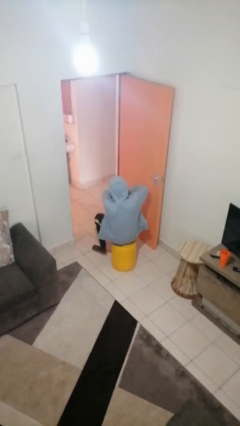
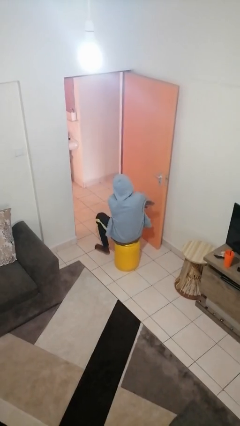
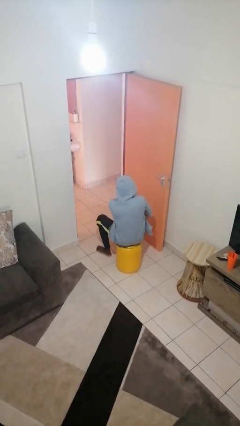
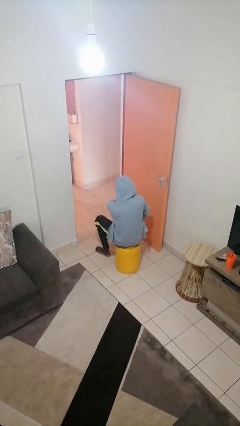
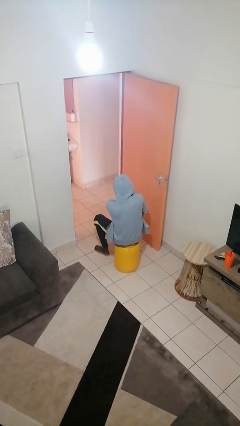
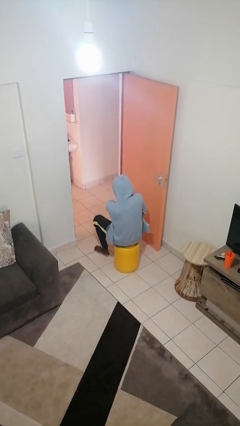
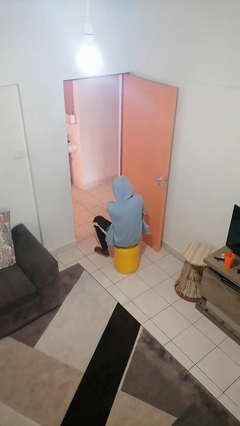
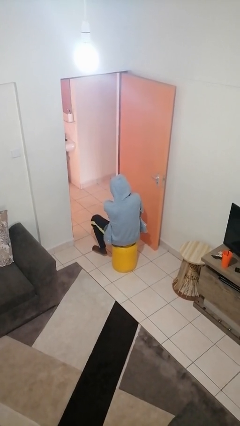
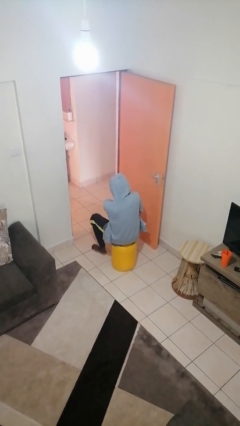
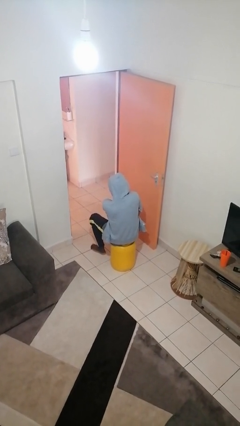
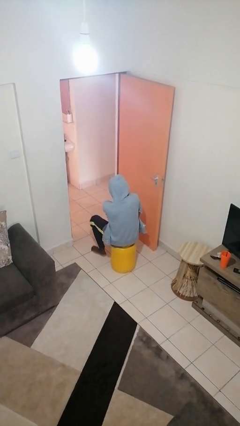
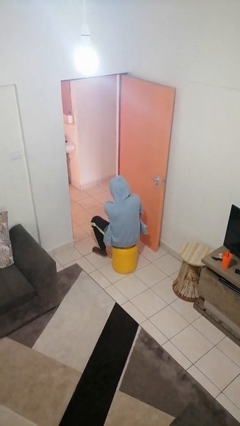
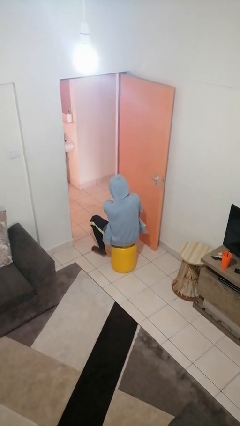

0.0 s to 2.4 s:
person crosses arms

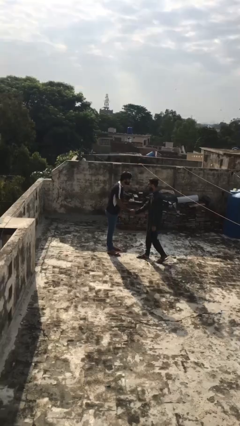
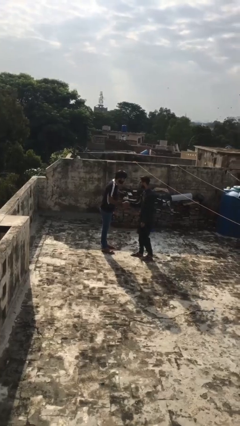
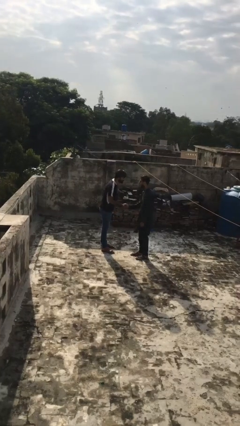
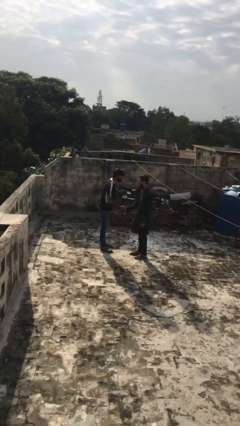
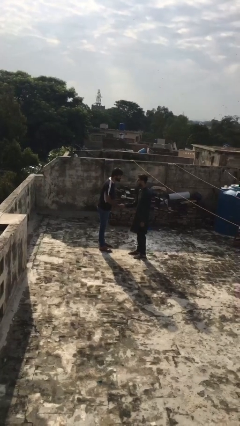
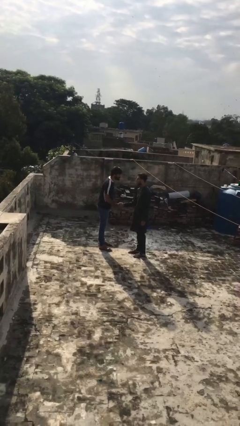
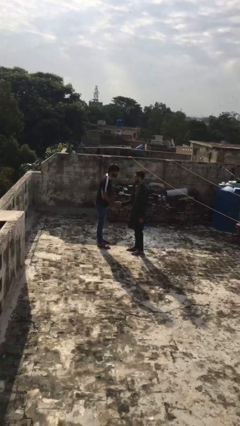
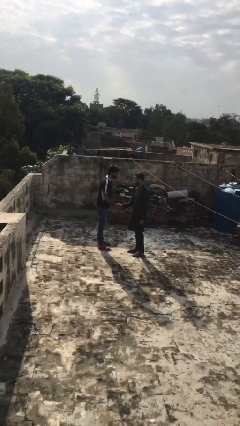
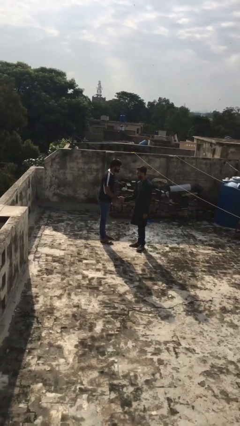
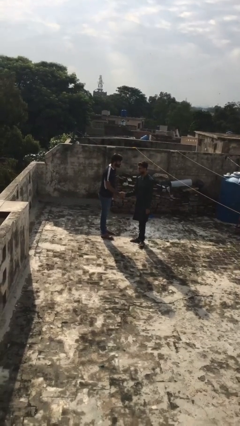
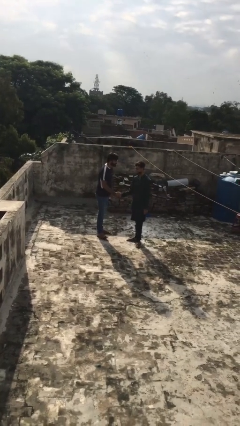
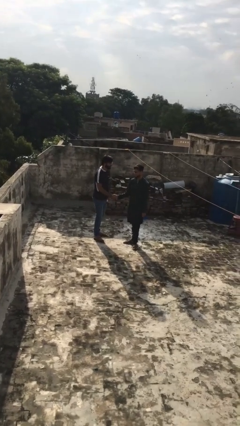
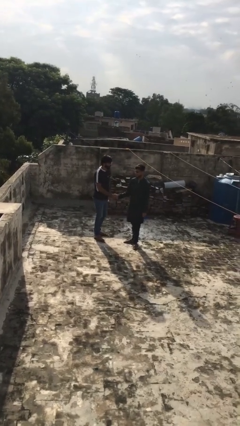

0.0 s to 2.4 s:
person shakes hand

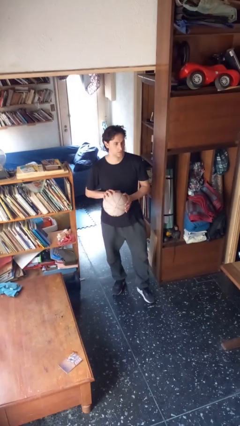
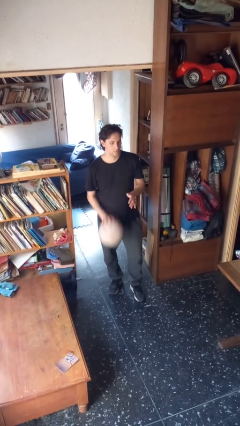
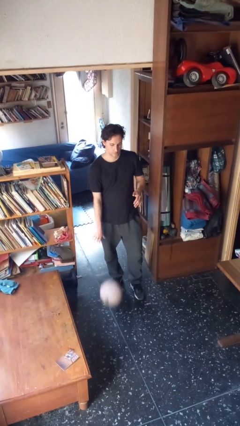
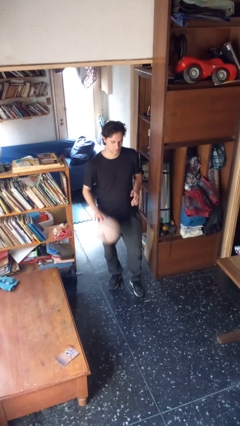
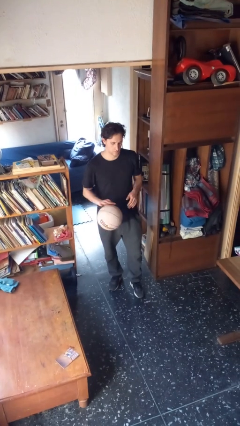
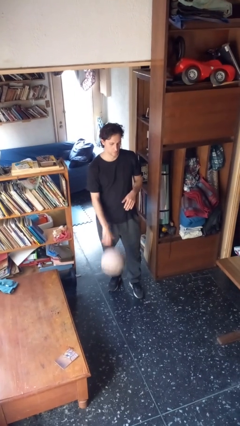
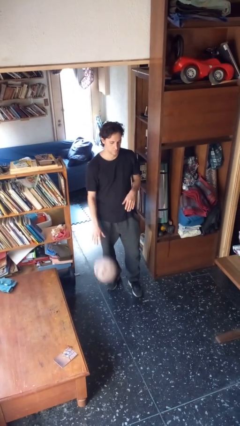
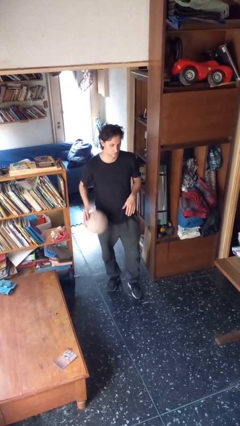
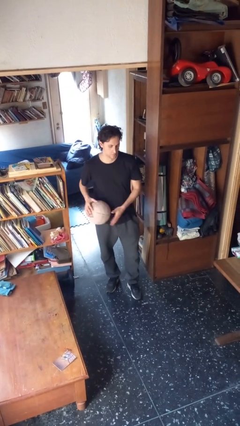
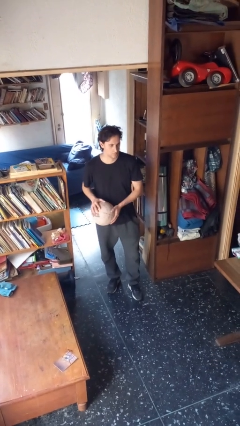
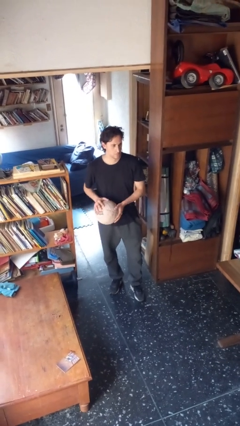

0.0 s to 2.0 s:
person bounces ball on floor

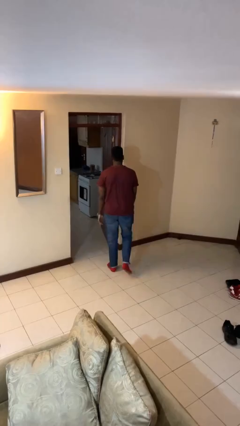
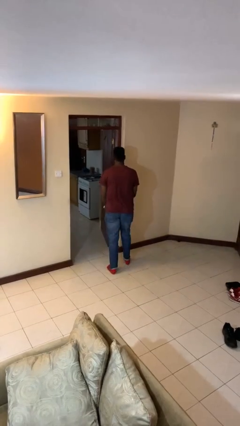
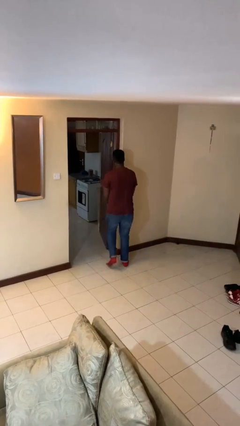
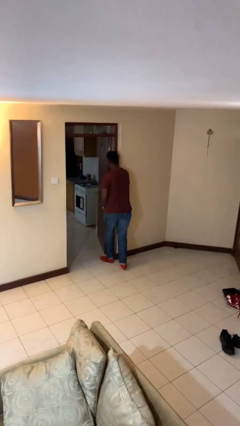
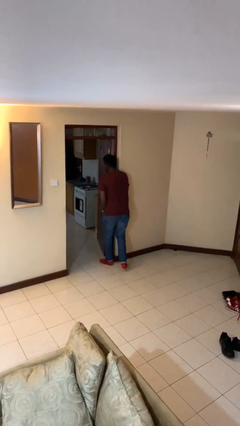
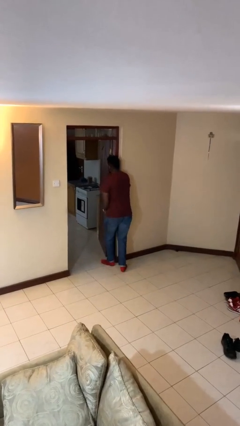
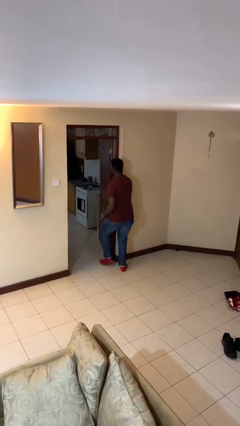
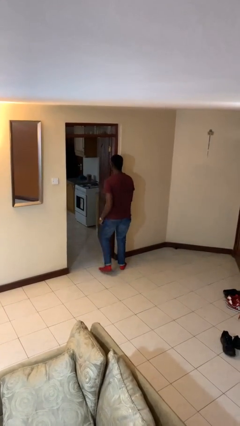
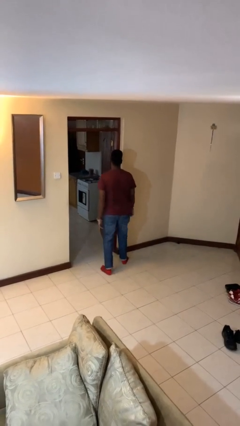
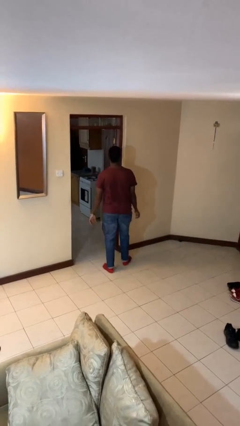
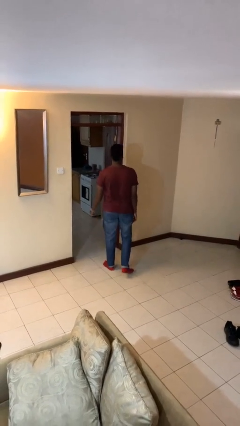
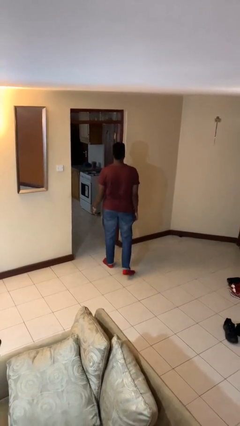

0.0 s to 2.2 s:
person bumps into wall

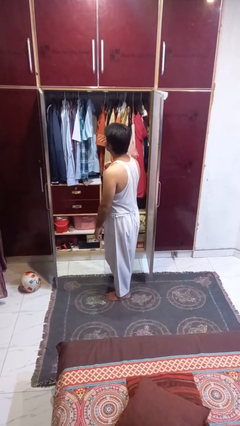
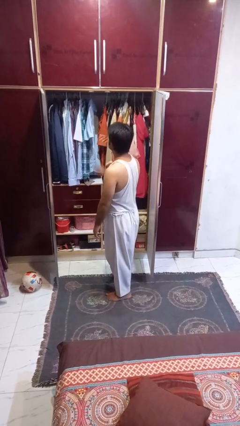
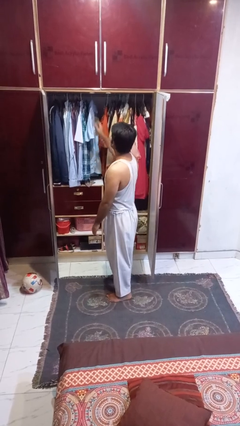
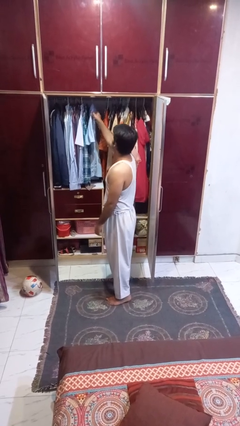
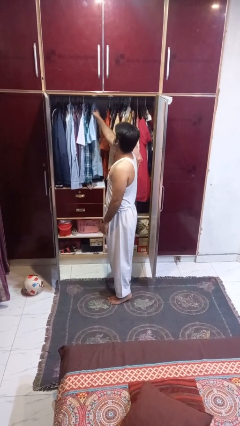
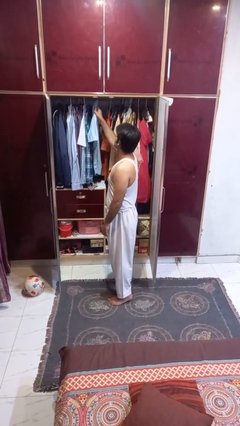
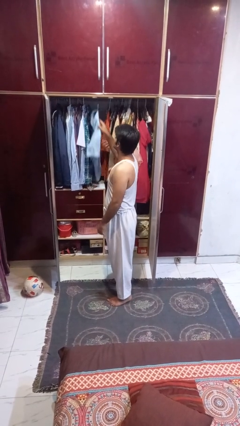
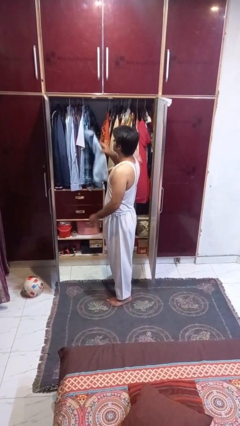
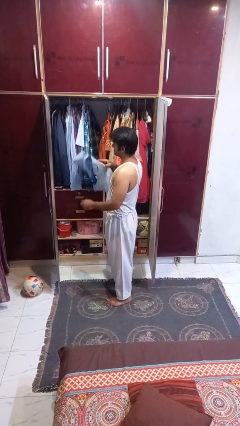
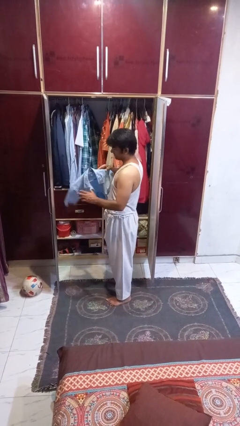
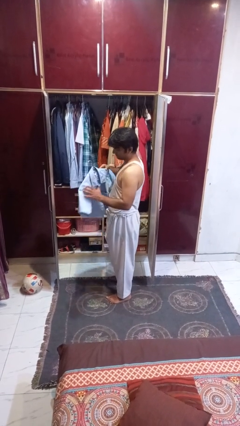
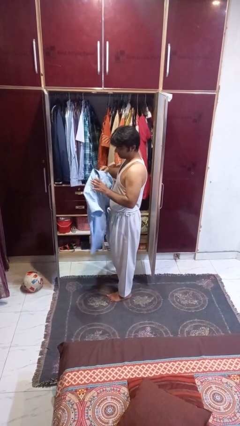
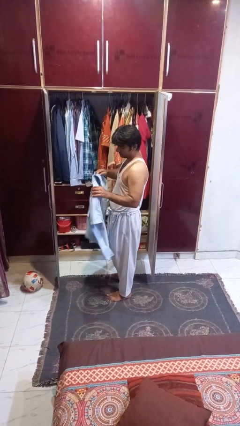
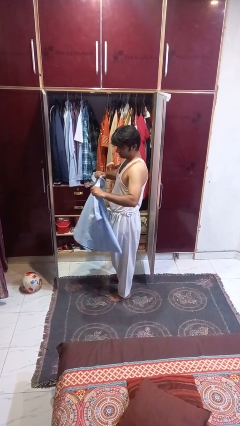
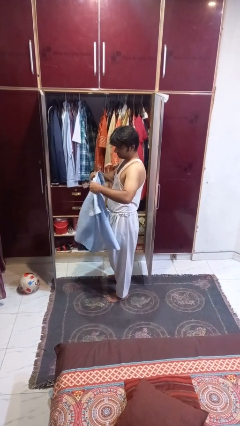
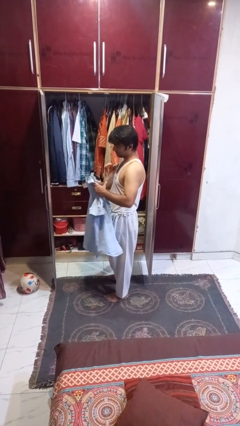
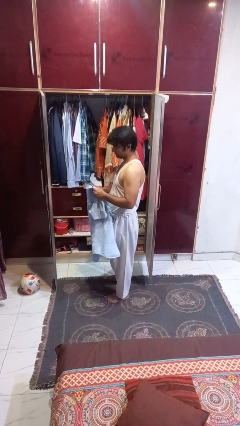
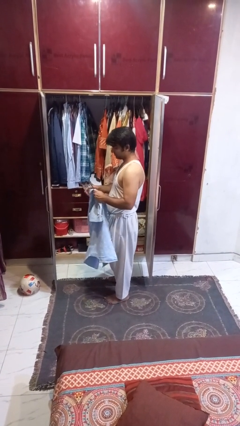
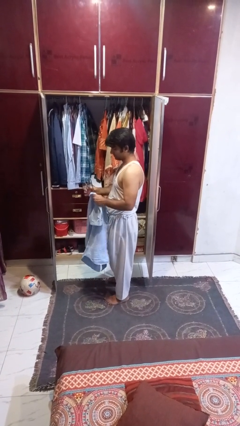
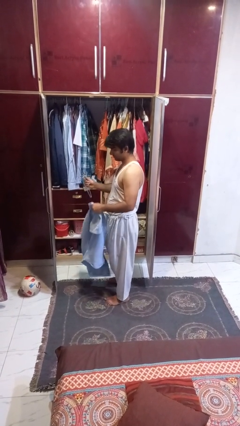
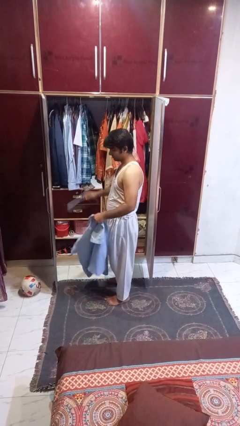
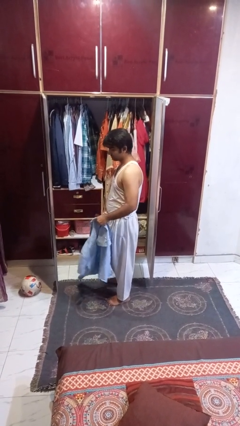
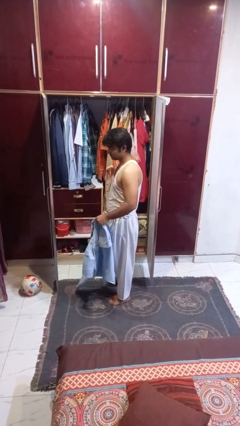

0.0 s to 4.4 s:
person takes clothes from closet

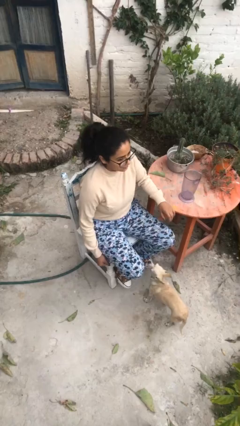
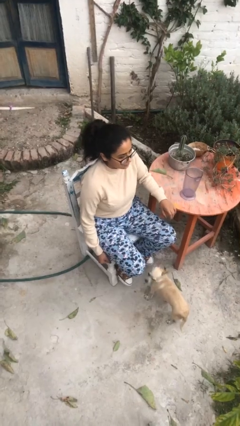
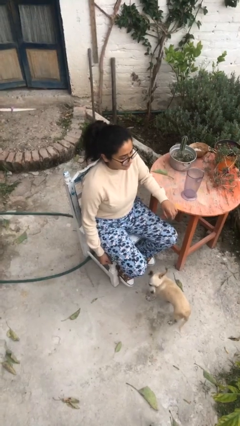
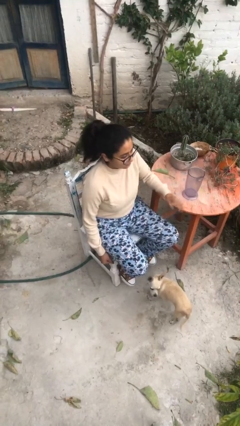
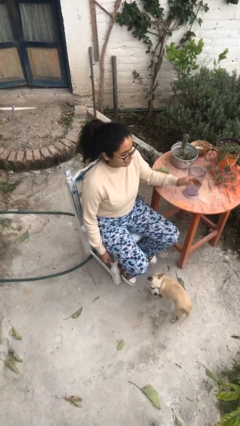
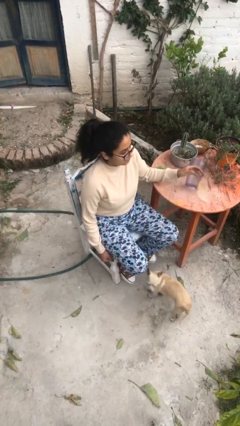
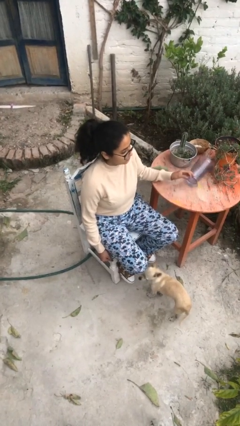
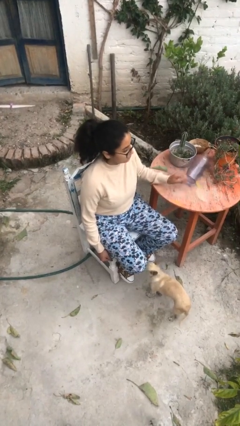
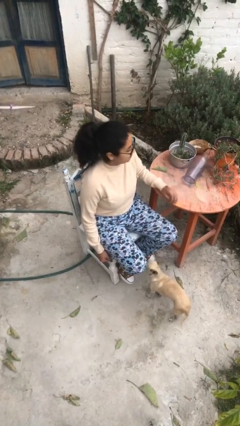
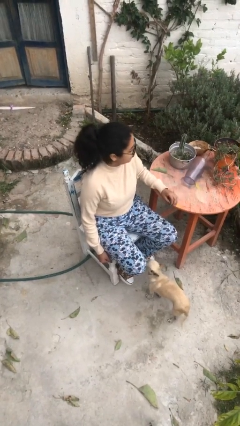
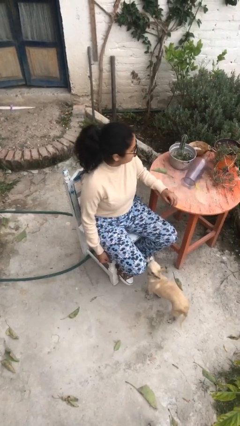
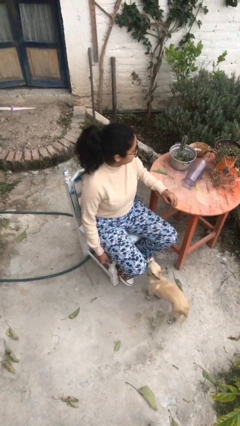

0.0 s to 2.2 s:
person knocks over glass

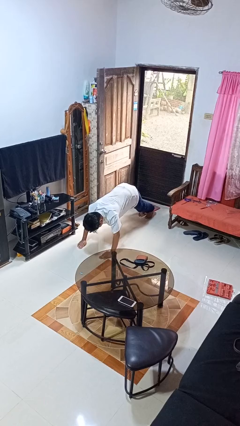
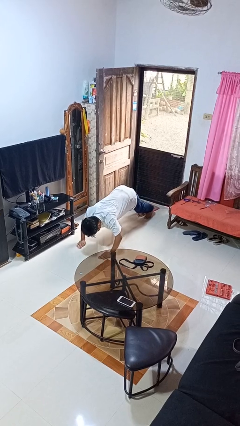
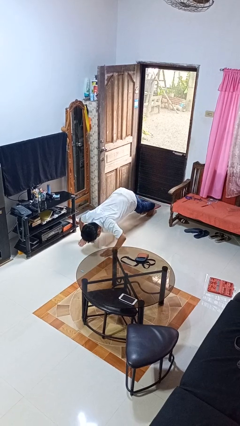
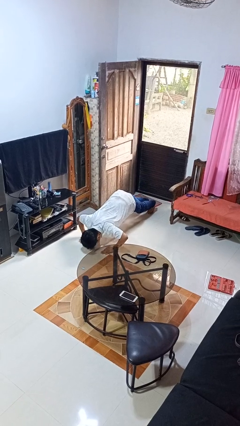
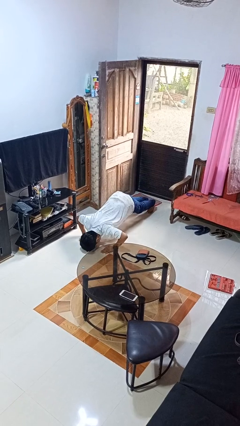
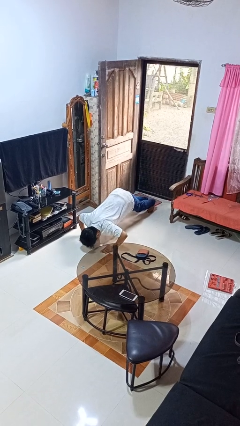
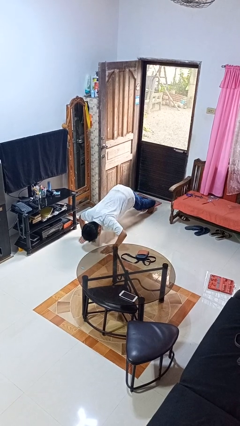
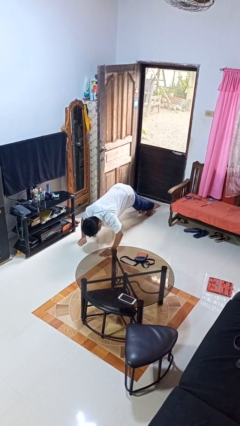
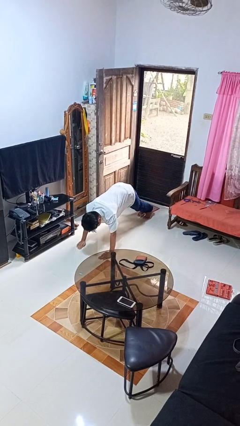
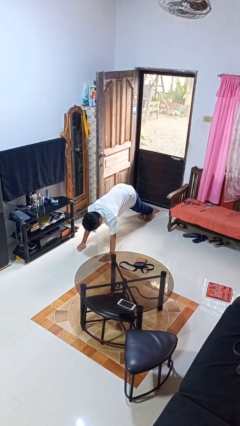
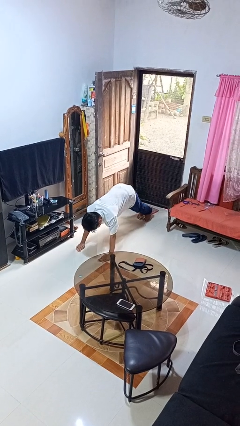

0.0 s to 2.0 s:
person exercises with pushup
